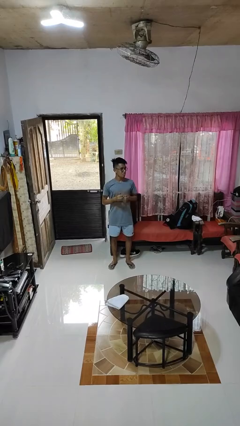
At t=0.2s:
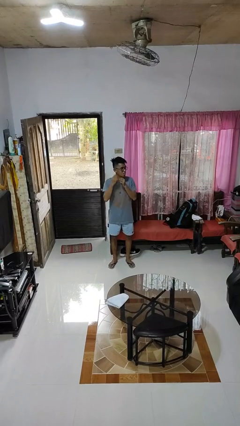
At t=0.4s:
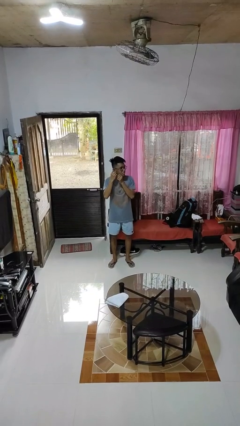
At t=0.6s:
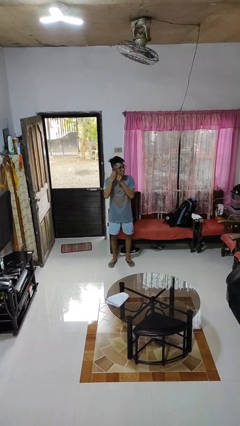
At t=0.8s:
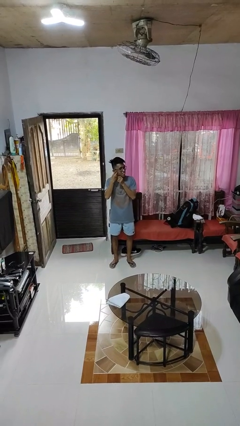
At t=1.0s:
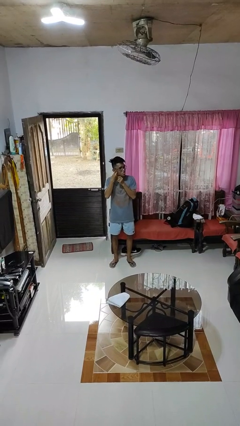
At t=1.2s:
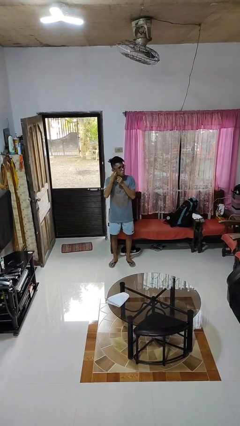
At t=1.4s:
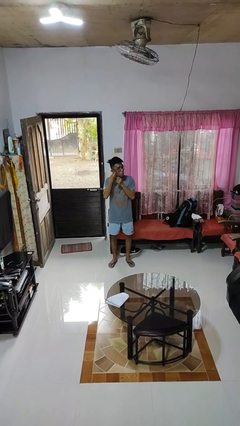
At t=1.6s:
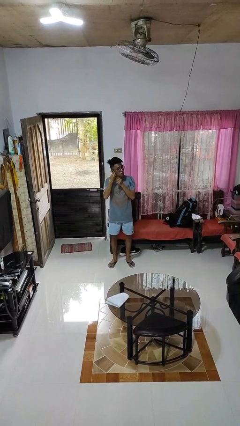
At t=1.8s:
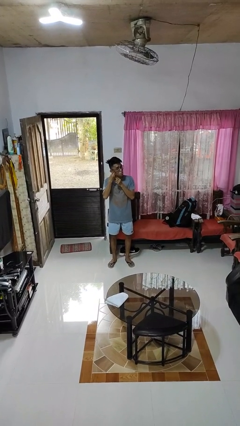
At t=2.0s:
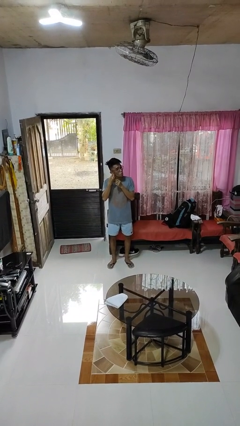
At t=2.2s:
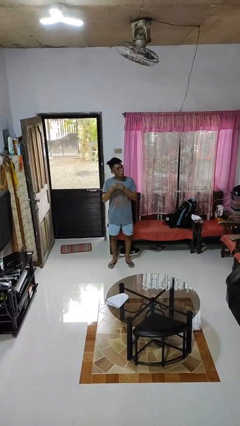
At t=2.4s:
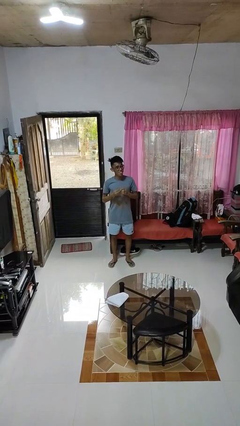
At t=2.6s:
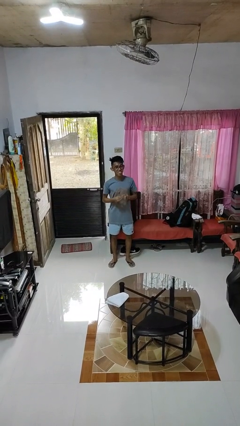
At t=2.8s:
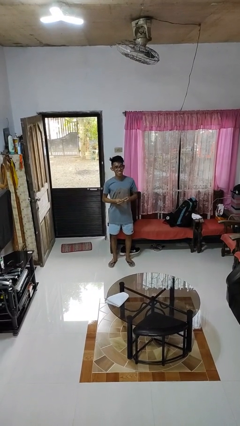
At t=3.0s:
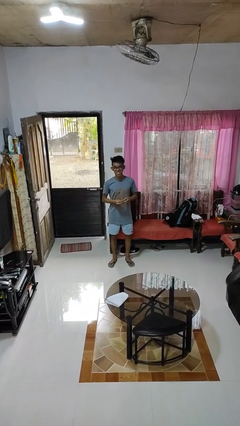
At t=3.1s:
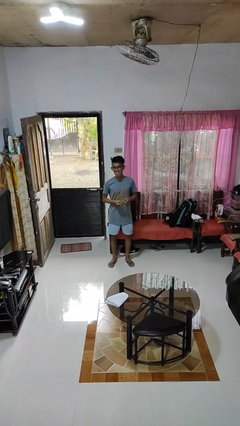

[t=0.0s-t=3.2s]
person takes off earrings

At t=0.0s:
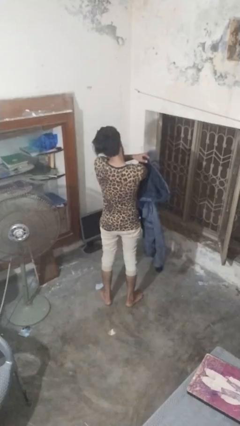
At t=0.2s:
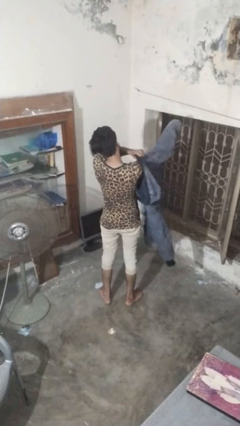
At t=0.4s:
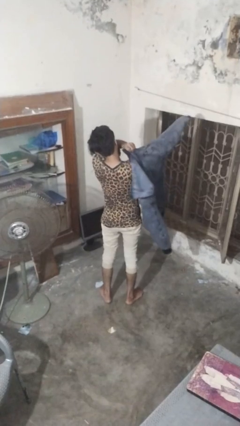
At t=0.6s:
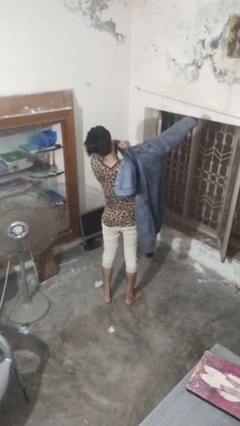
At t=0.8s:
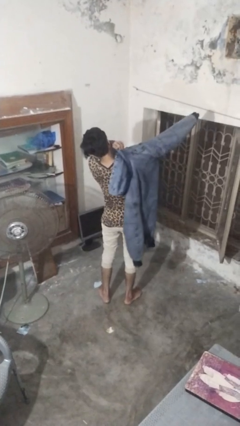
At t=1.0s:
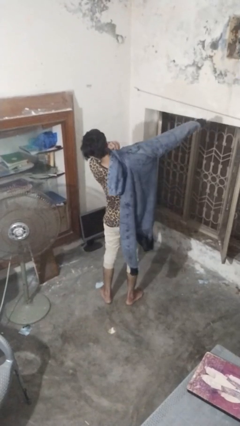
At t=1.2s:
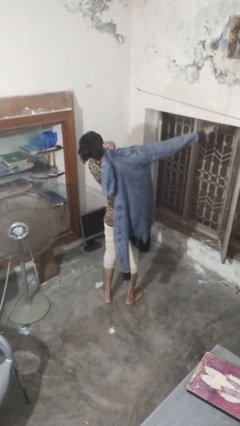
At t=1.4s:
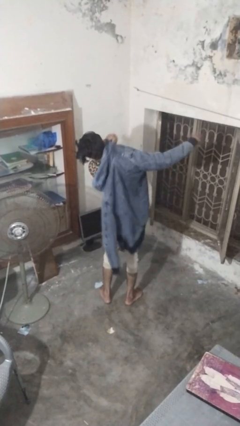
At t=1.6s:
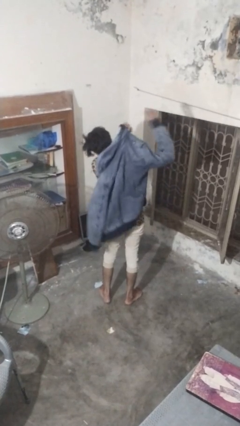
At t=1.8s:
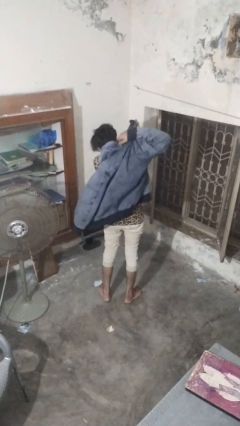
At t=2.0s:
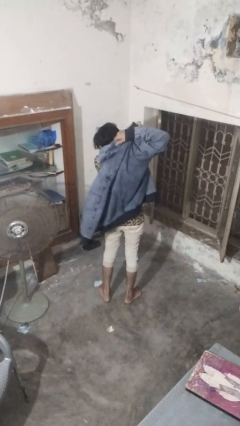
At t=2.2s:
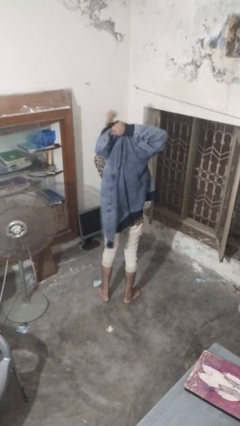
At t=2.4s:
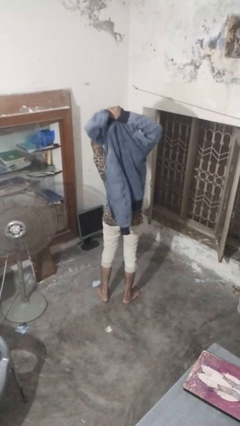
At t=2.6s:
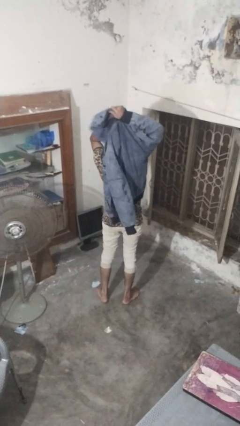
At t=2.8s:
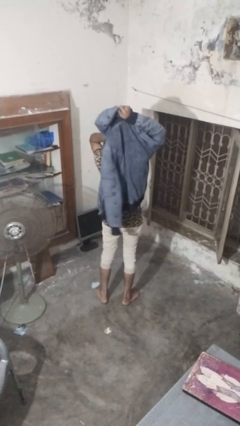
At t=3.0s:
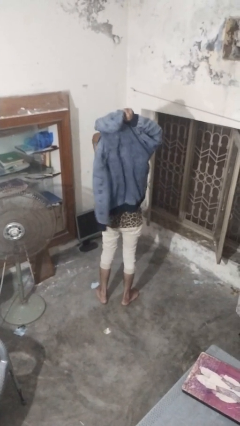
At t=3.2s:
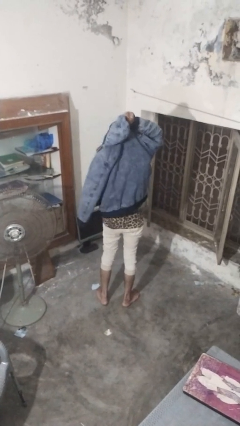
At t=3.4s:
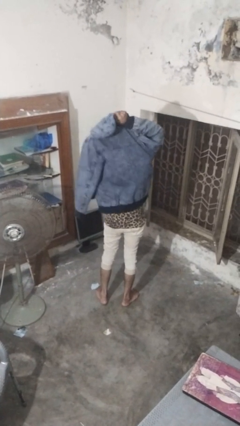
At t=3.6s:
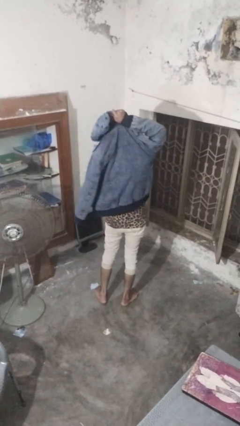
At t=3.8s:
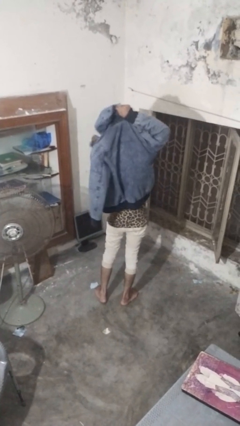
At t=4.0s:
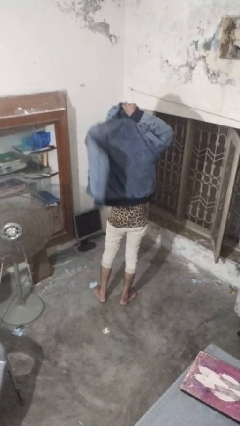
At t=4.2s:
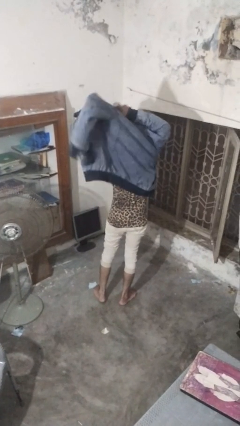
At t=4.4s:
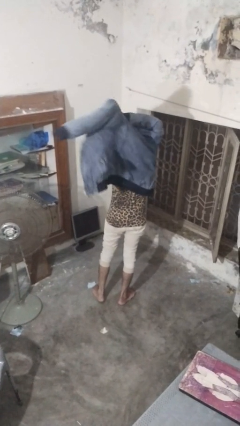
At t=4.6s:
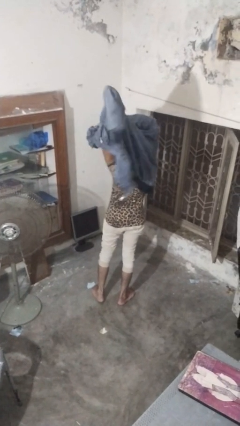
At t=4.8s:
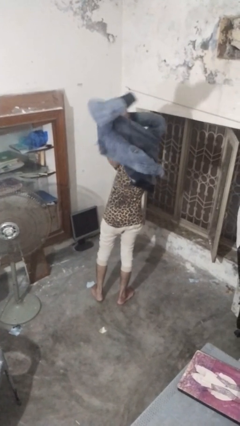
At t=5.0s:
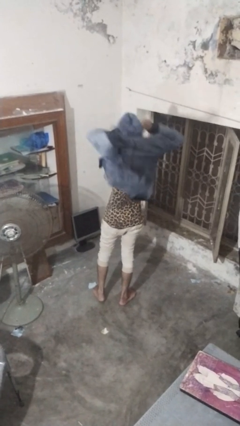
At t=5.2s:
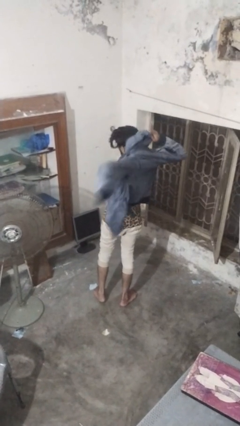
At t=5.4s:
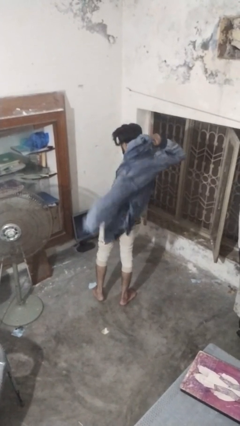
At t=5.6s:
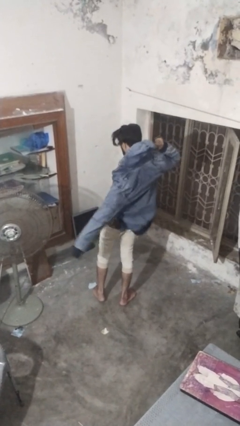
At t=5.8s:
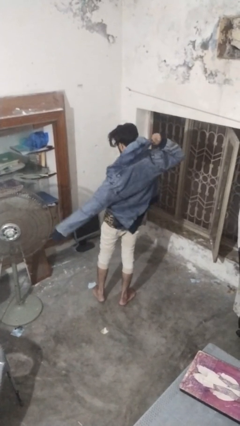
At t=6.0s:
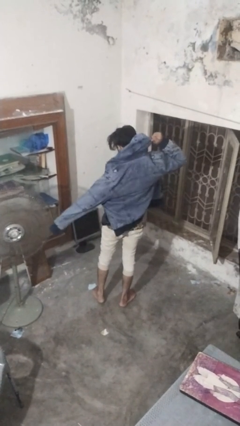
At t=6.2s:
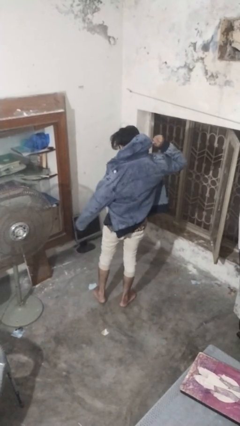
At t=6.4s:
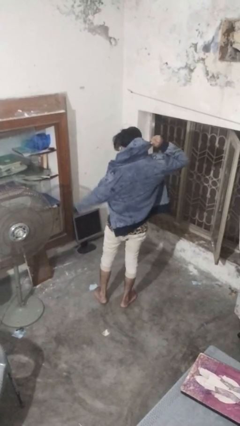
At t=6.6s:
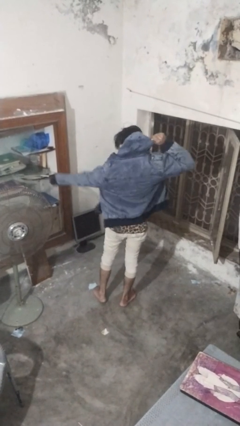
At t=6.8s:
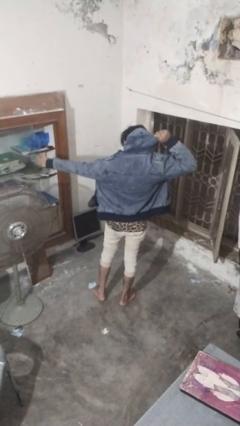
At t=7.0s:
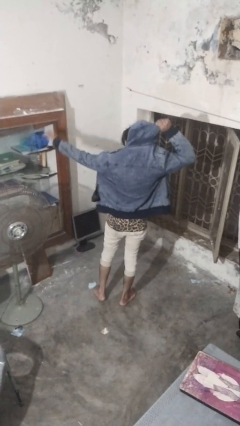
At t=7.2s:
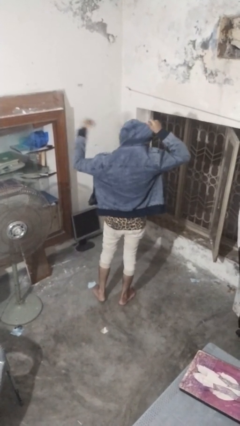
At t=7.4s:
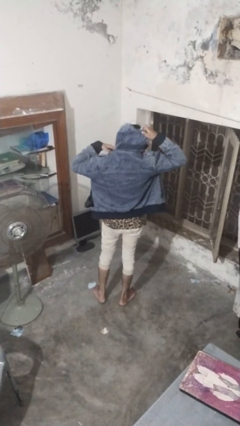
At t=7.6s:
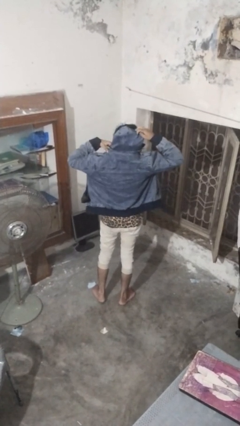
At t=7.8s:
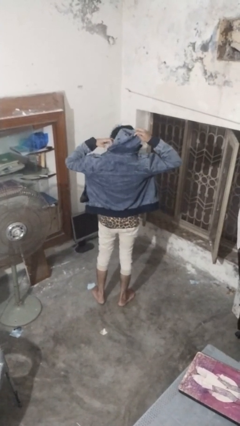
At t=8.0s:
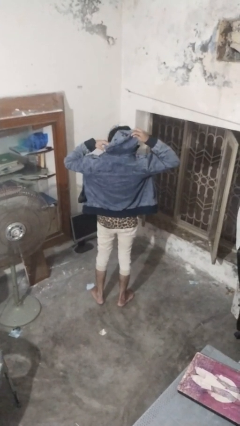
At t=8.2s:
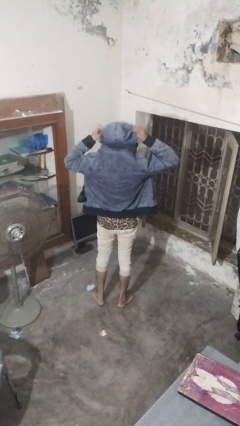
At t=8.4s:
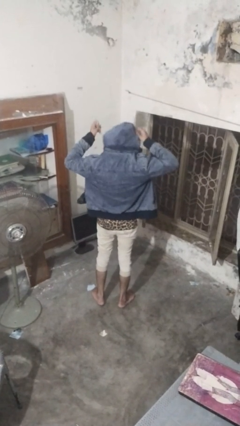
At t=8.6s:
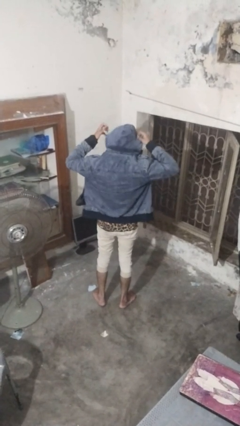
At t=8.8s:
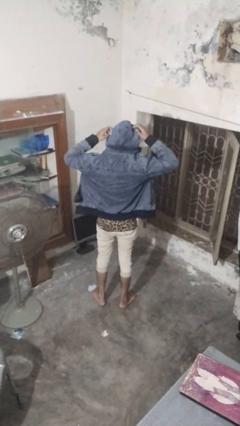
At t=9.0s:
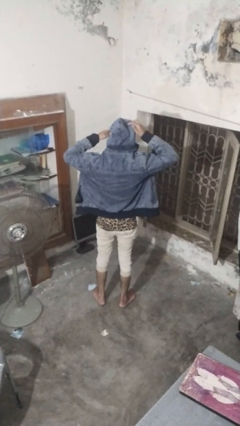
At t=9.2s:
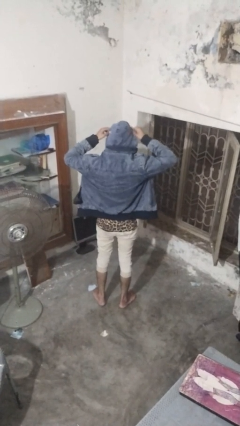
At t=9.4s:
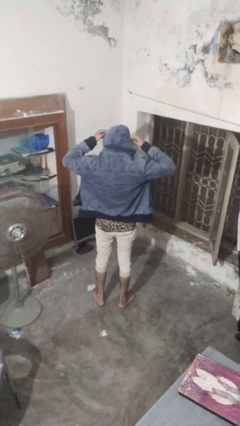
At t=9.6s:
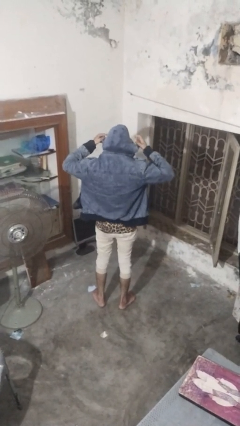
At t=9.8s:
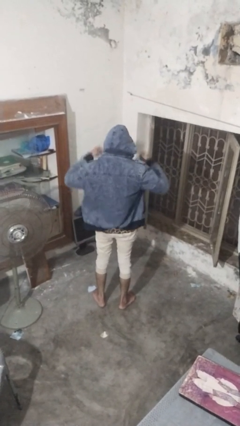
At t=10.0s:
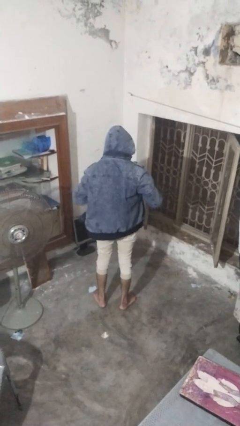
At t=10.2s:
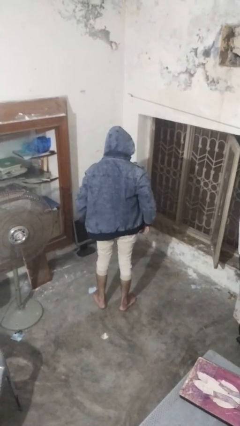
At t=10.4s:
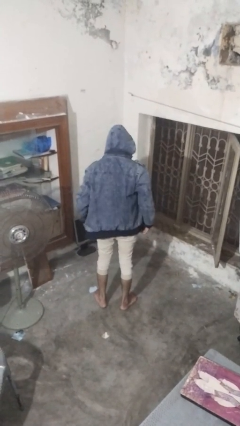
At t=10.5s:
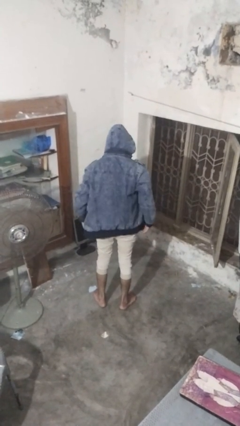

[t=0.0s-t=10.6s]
person puts on hoodie

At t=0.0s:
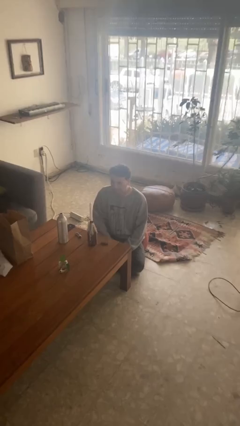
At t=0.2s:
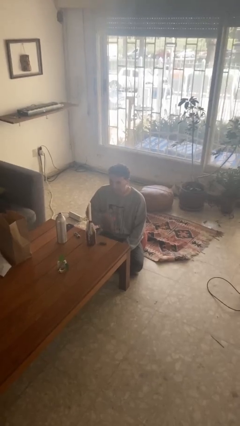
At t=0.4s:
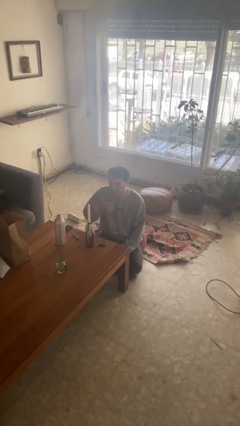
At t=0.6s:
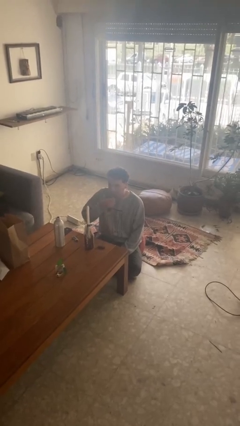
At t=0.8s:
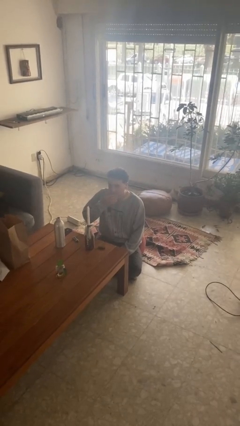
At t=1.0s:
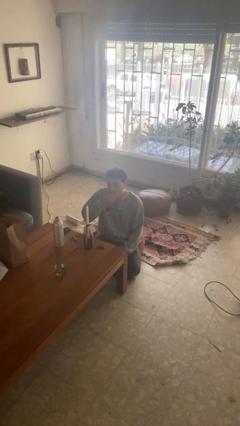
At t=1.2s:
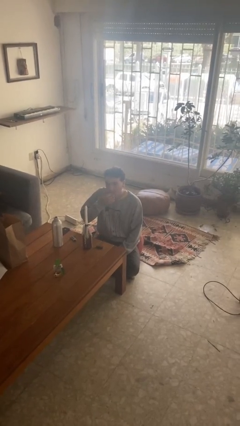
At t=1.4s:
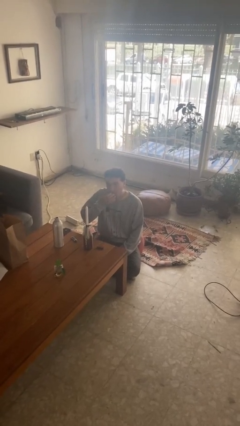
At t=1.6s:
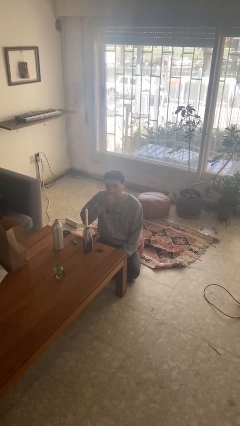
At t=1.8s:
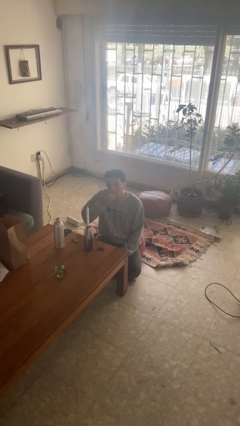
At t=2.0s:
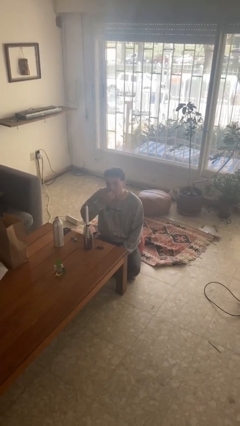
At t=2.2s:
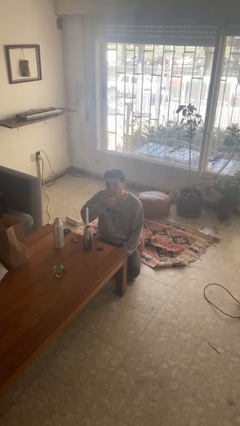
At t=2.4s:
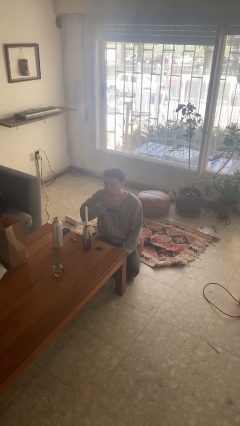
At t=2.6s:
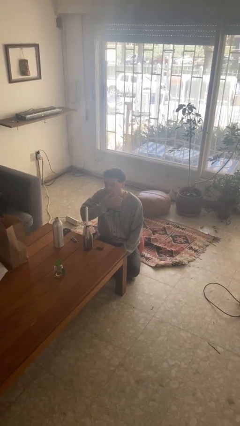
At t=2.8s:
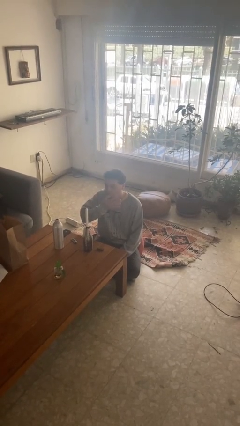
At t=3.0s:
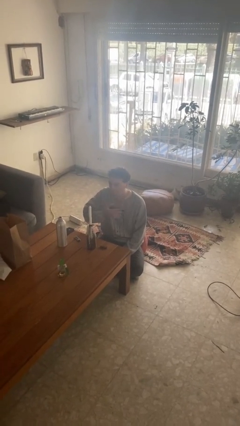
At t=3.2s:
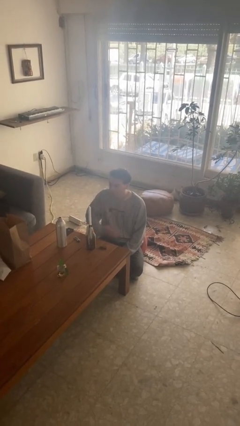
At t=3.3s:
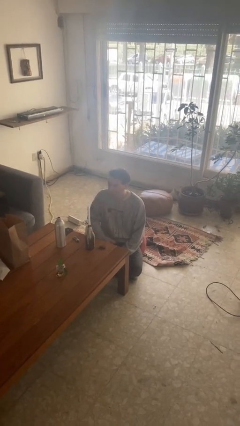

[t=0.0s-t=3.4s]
person licks fingers

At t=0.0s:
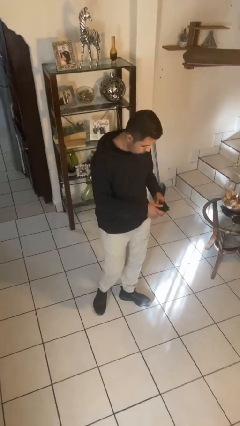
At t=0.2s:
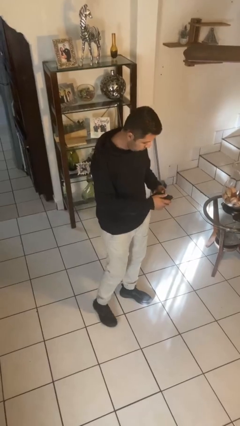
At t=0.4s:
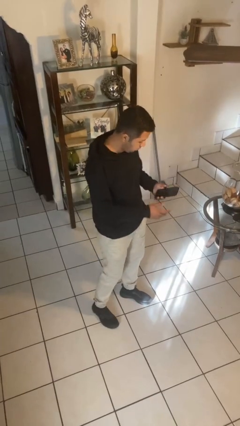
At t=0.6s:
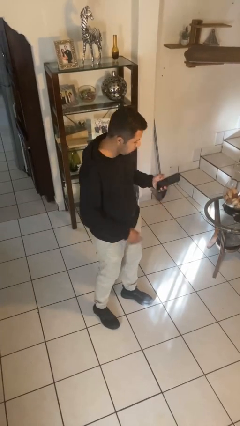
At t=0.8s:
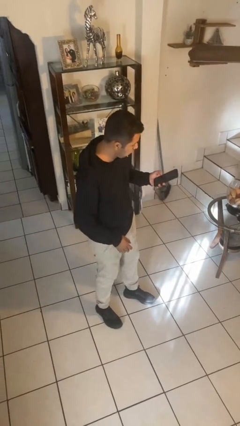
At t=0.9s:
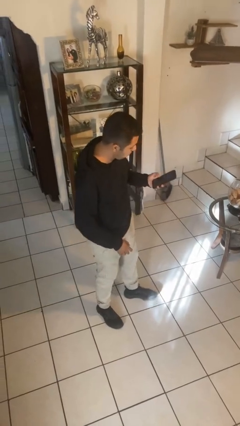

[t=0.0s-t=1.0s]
person takes phone from pocket
